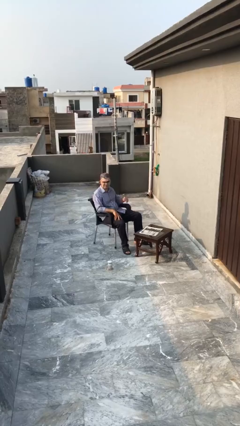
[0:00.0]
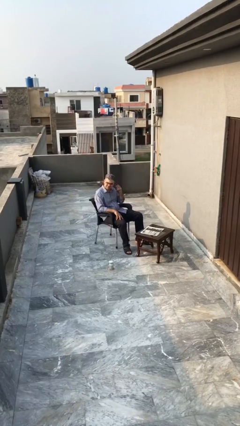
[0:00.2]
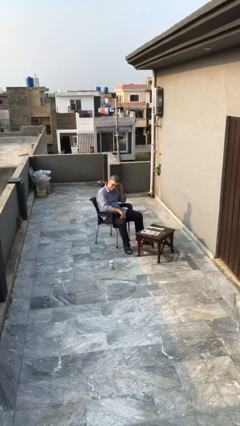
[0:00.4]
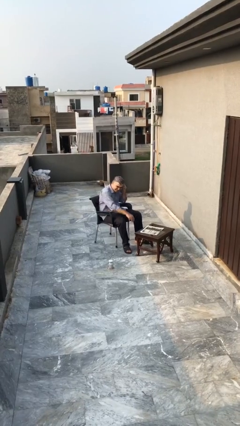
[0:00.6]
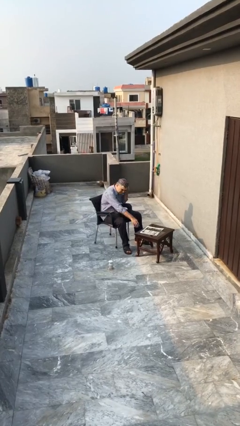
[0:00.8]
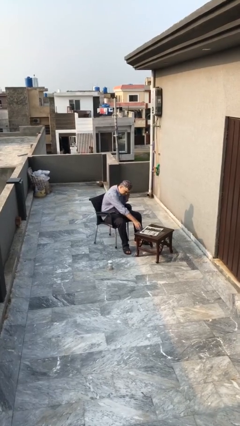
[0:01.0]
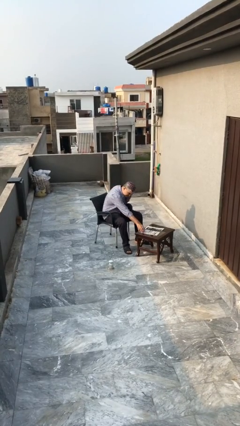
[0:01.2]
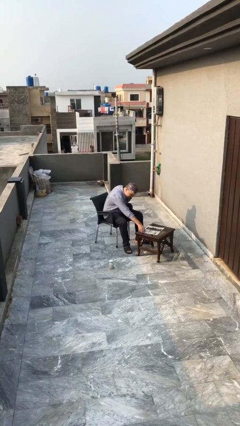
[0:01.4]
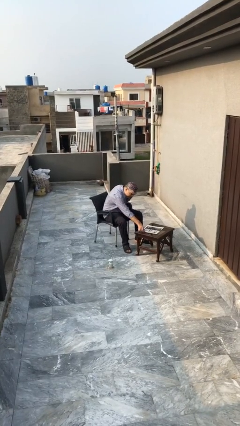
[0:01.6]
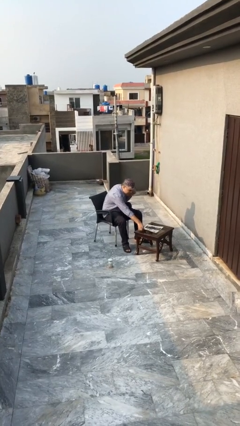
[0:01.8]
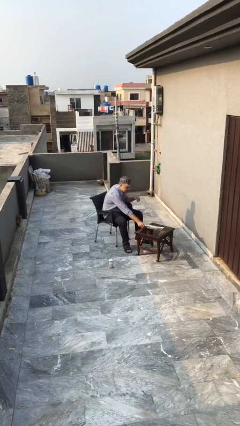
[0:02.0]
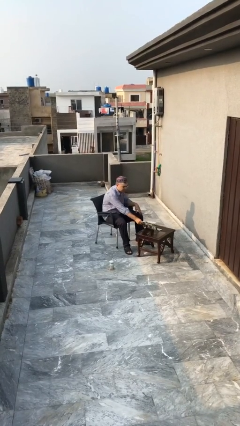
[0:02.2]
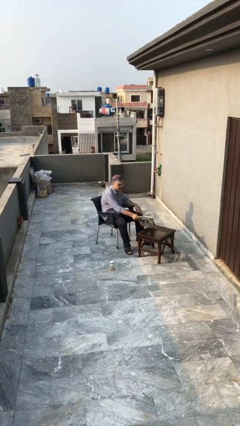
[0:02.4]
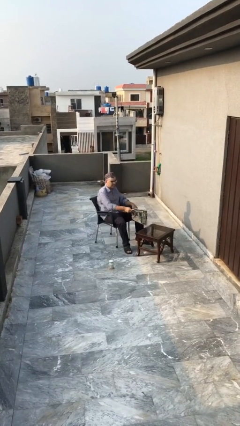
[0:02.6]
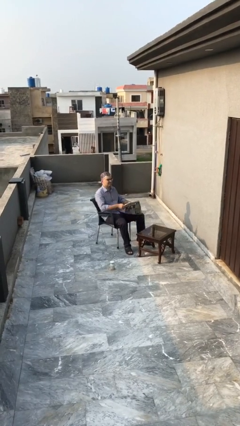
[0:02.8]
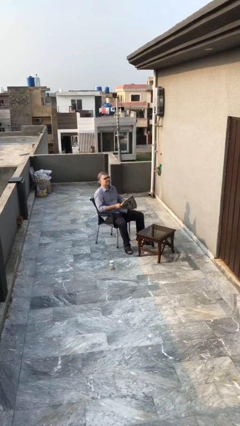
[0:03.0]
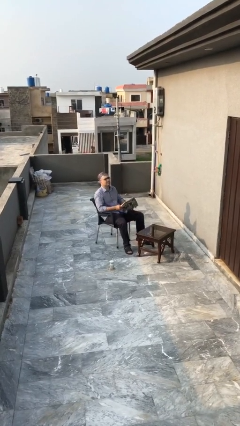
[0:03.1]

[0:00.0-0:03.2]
person picks up object from table

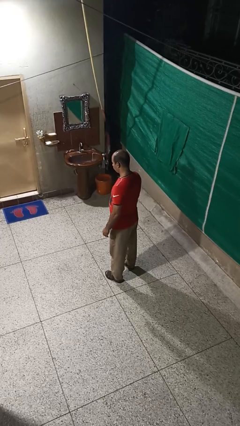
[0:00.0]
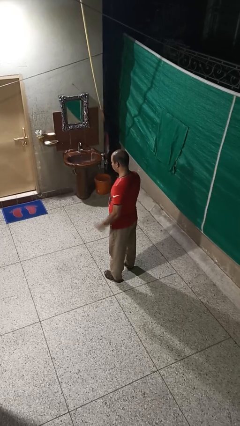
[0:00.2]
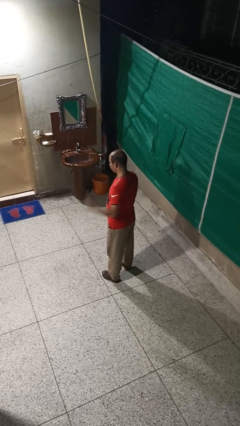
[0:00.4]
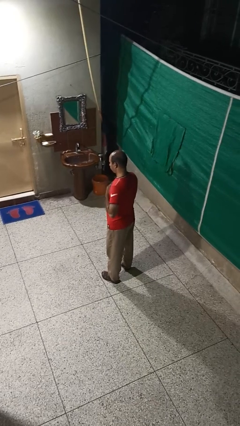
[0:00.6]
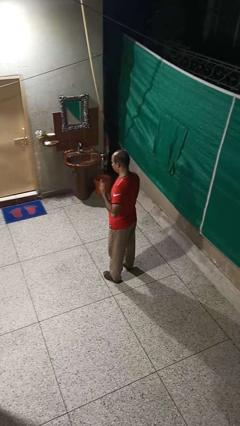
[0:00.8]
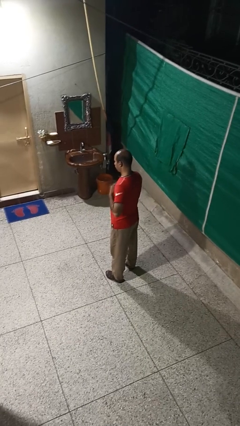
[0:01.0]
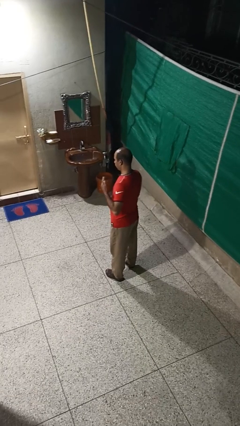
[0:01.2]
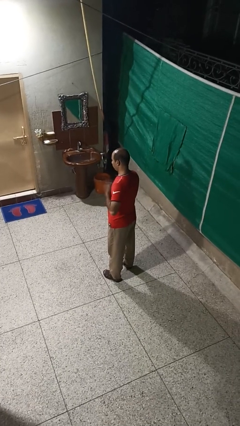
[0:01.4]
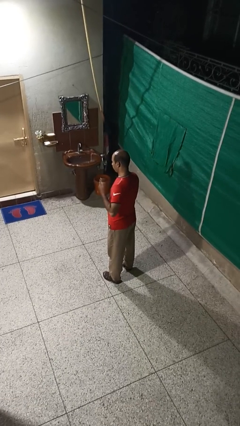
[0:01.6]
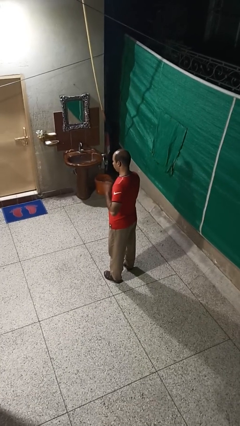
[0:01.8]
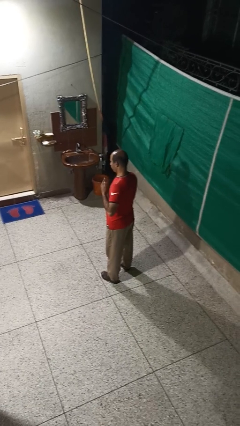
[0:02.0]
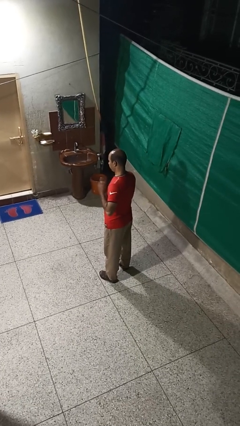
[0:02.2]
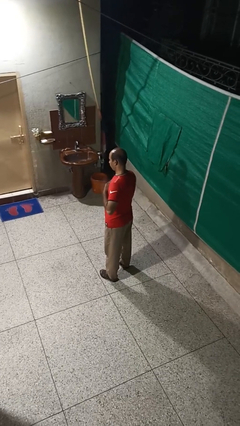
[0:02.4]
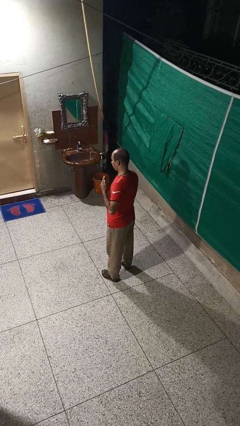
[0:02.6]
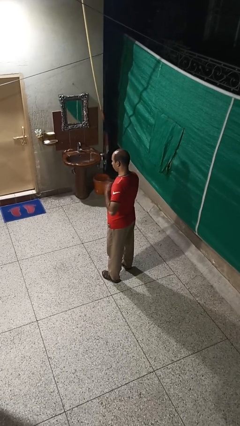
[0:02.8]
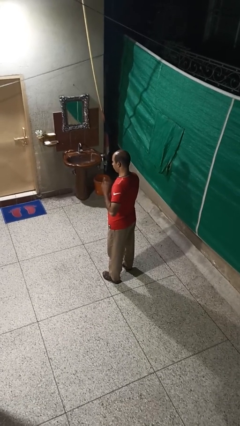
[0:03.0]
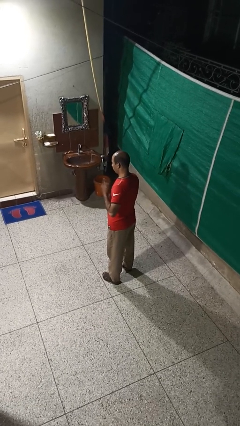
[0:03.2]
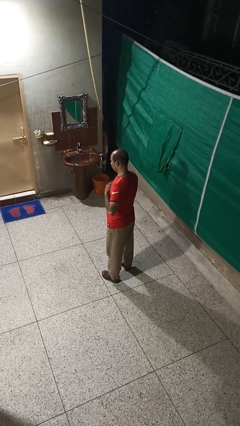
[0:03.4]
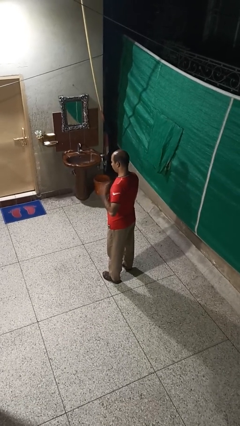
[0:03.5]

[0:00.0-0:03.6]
person drums on chest

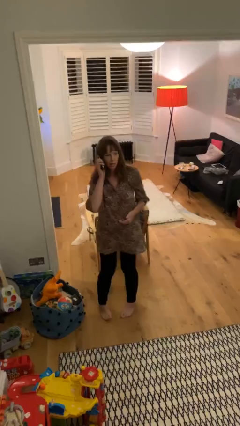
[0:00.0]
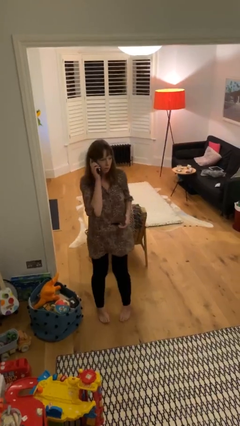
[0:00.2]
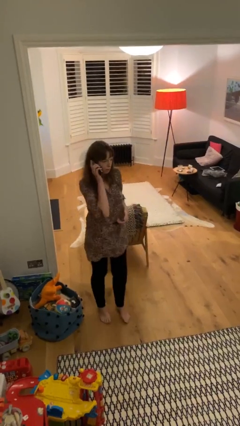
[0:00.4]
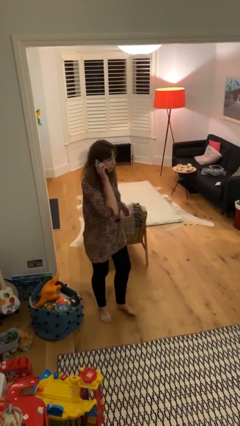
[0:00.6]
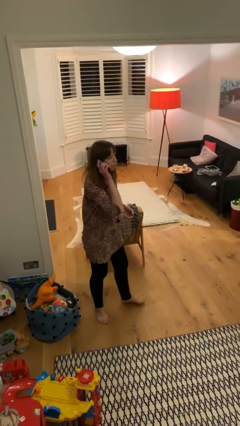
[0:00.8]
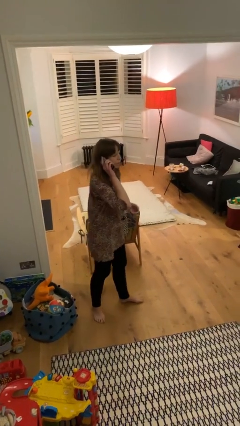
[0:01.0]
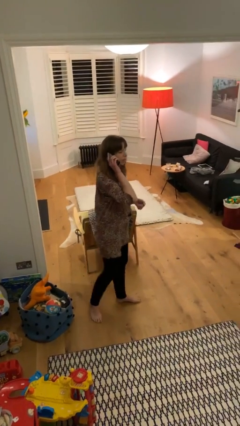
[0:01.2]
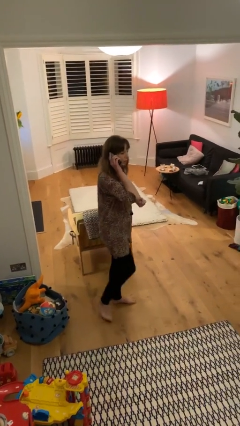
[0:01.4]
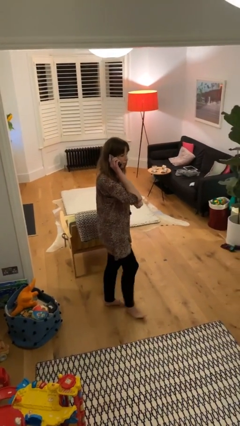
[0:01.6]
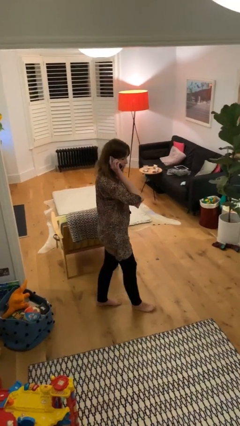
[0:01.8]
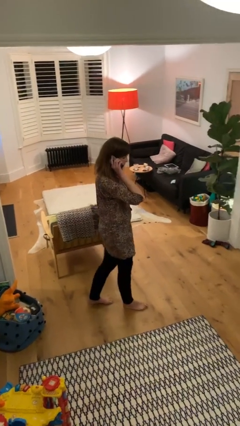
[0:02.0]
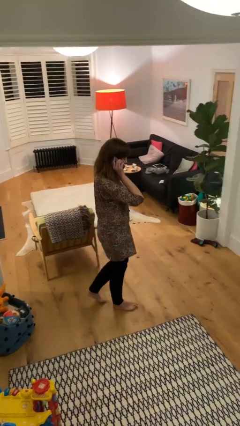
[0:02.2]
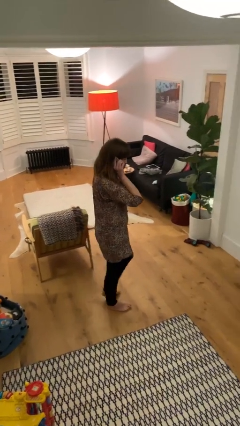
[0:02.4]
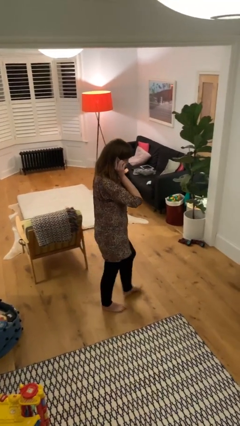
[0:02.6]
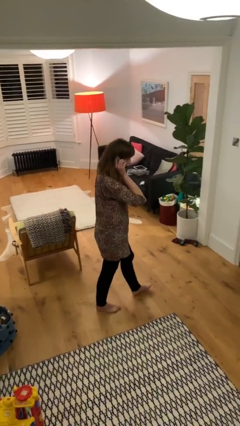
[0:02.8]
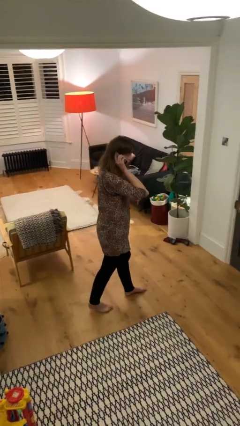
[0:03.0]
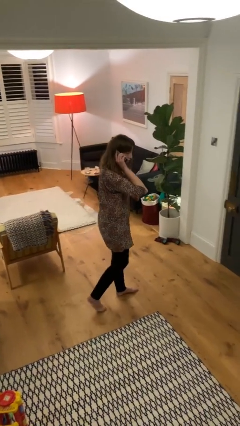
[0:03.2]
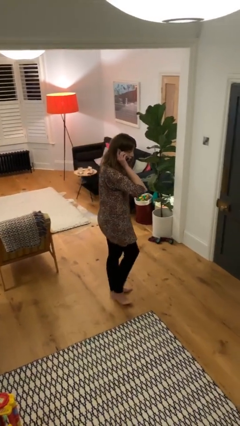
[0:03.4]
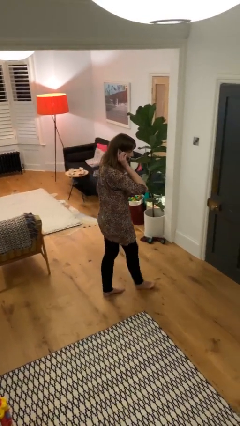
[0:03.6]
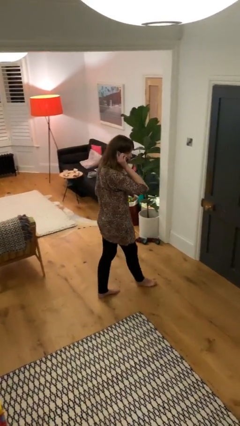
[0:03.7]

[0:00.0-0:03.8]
person talks on phone

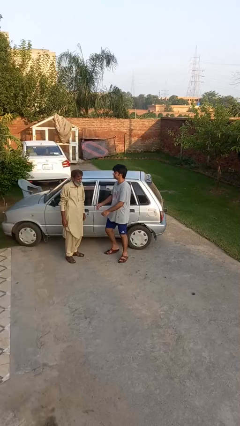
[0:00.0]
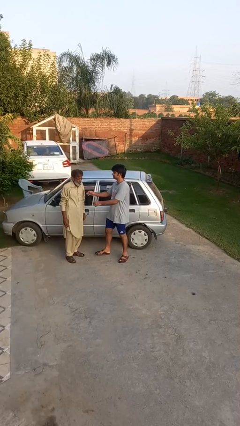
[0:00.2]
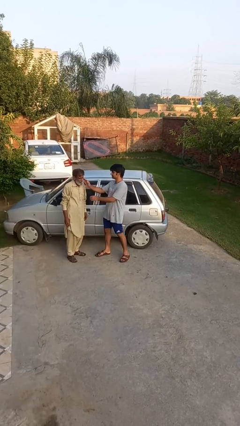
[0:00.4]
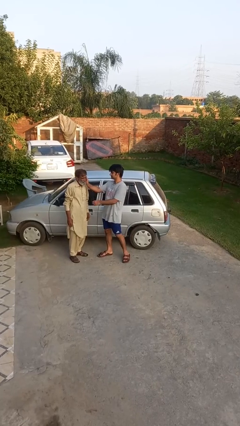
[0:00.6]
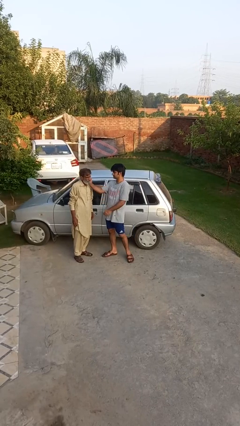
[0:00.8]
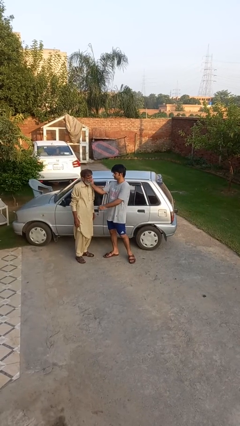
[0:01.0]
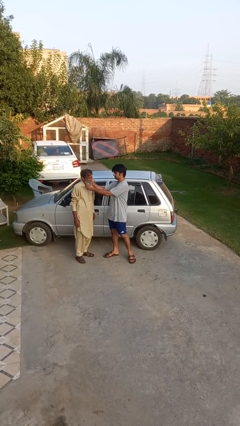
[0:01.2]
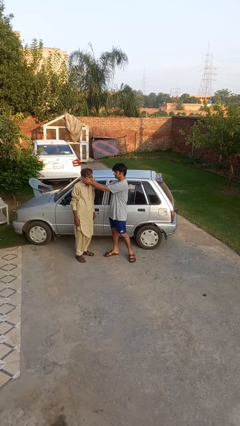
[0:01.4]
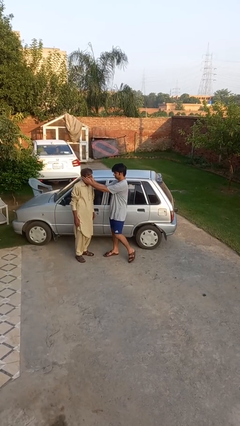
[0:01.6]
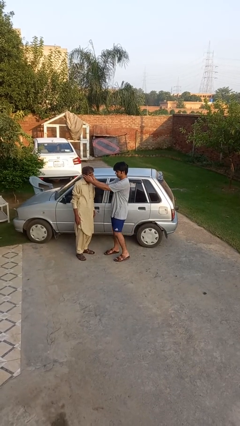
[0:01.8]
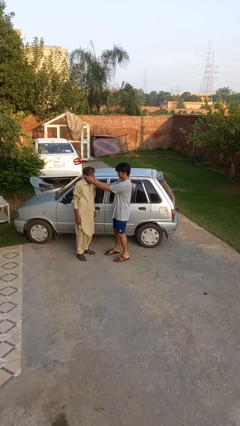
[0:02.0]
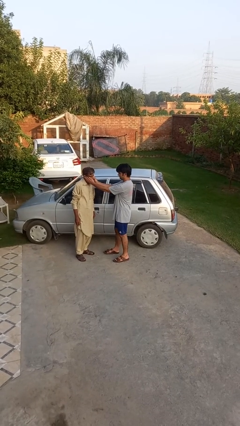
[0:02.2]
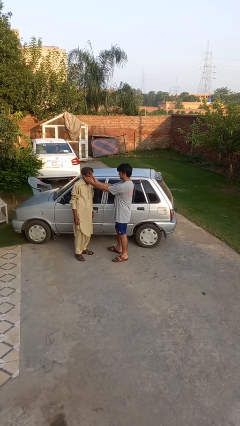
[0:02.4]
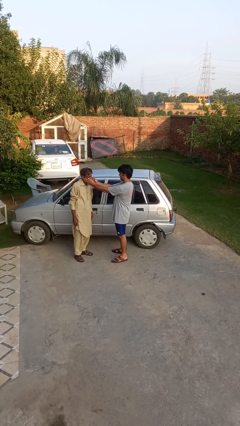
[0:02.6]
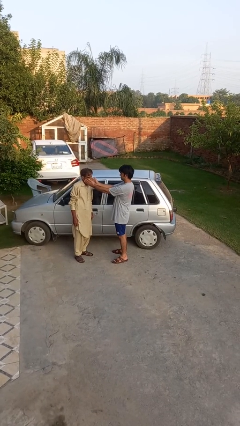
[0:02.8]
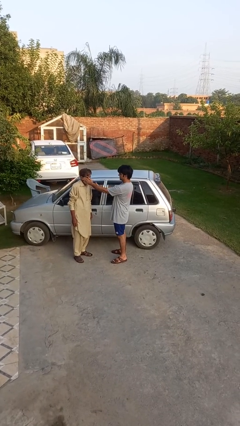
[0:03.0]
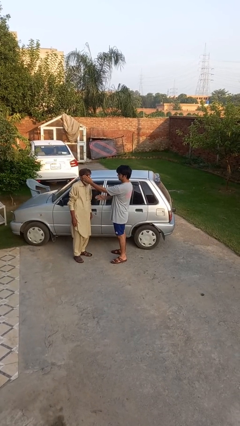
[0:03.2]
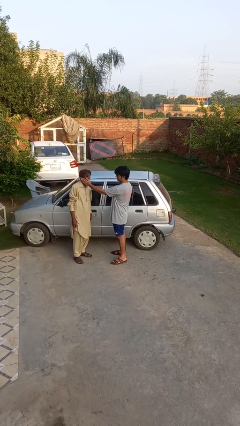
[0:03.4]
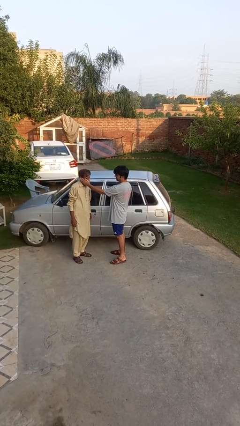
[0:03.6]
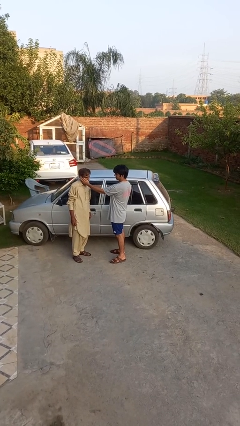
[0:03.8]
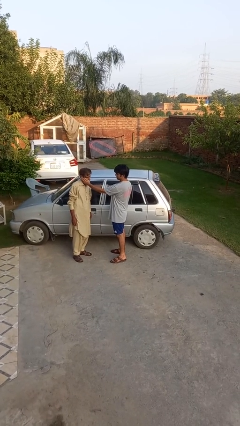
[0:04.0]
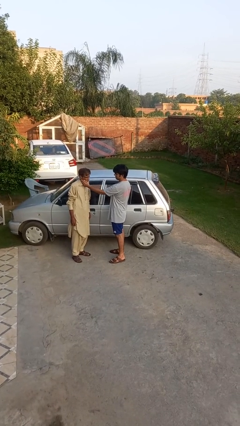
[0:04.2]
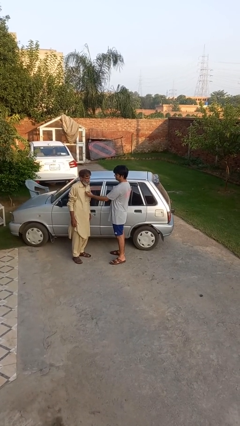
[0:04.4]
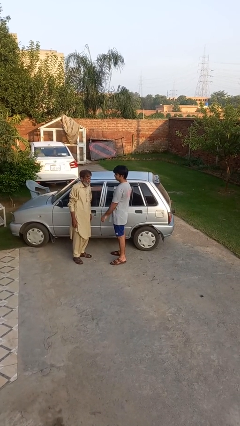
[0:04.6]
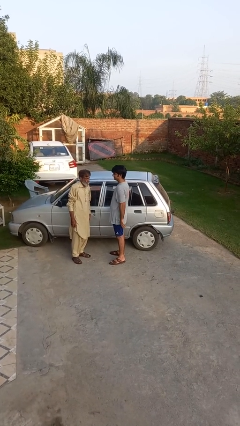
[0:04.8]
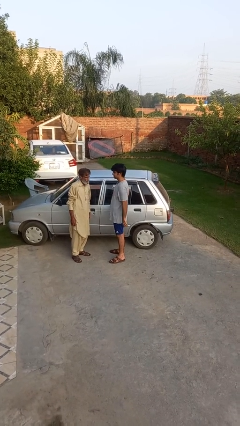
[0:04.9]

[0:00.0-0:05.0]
person touches face of person

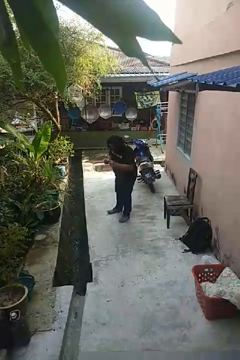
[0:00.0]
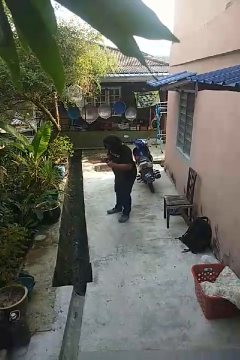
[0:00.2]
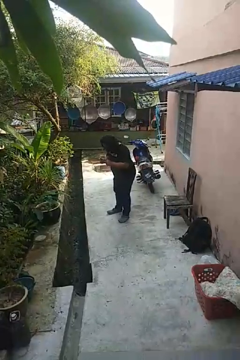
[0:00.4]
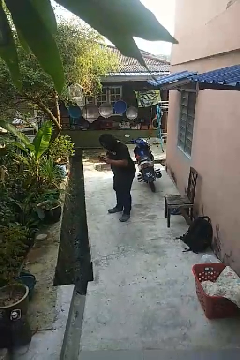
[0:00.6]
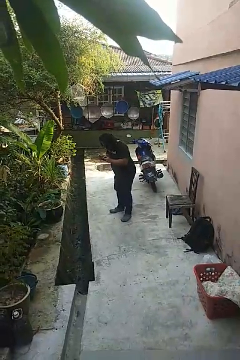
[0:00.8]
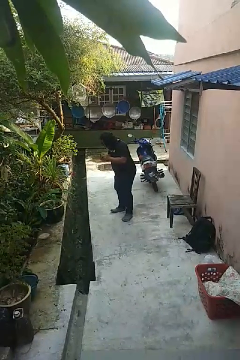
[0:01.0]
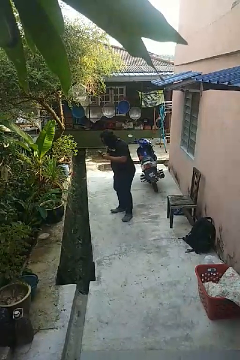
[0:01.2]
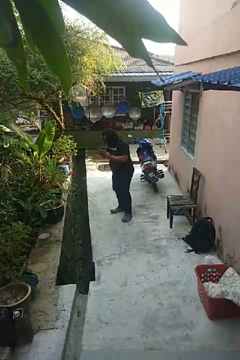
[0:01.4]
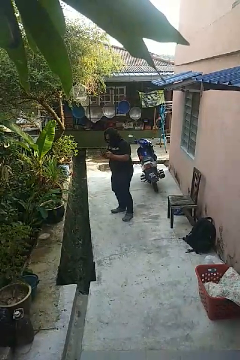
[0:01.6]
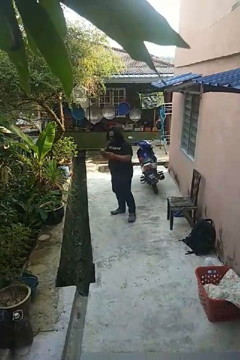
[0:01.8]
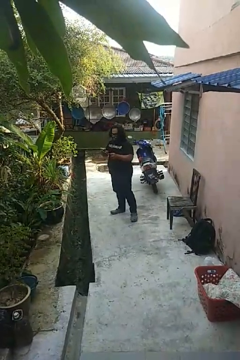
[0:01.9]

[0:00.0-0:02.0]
person interacts with handheld game

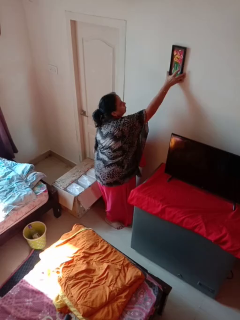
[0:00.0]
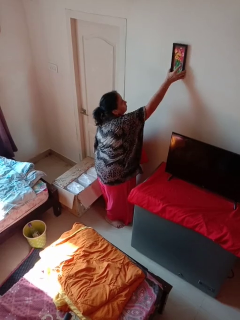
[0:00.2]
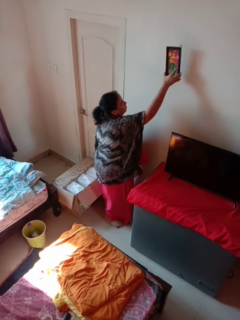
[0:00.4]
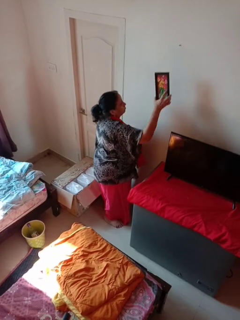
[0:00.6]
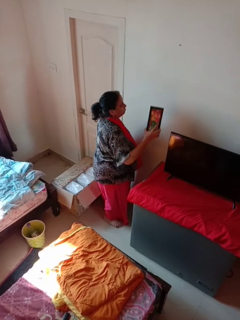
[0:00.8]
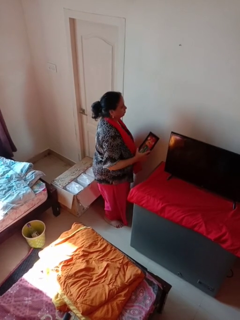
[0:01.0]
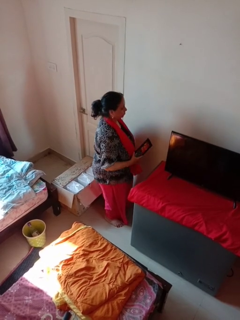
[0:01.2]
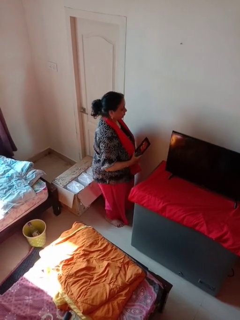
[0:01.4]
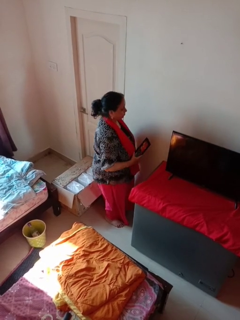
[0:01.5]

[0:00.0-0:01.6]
person takes down picture frame
